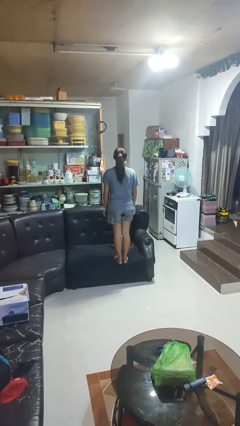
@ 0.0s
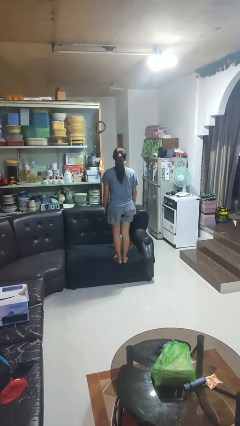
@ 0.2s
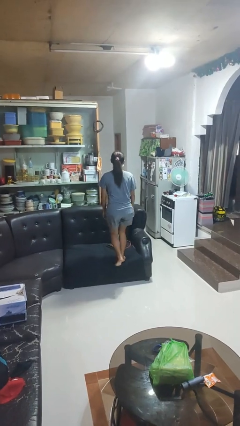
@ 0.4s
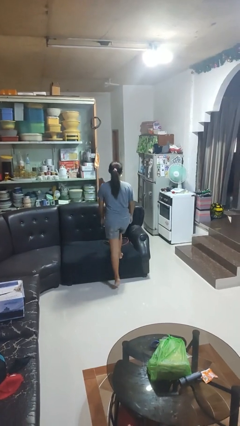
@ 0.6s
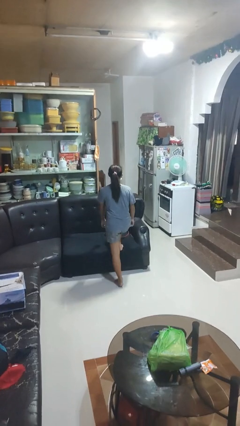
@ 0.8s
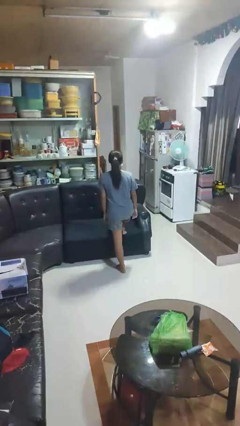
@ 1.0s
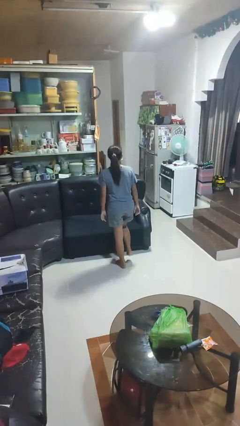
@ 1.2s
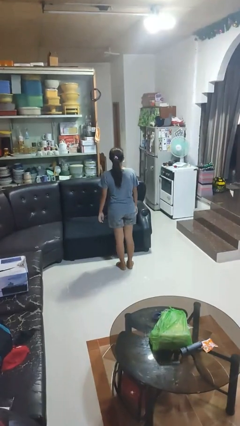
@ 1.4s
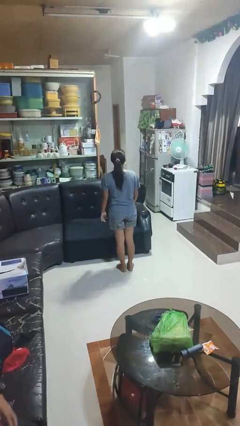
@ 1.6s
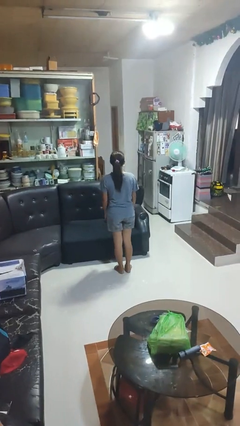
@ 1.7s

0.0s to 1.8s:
person climbs off couch

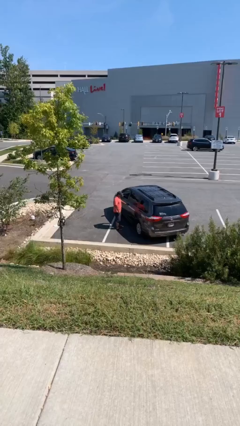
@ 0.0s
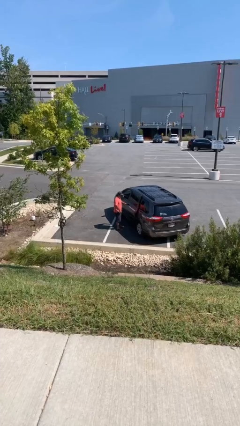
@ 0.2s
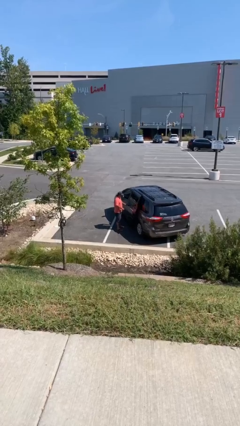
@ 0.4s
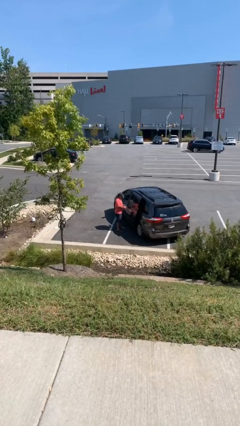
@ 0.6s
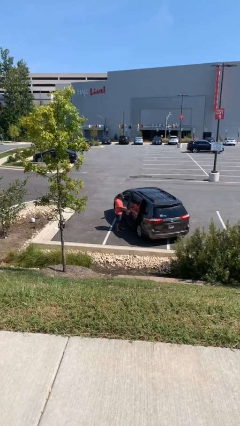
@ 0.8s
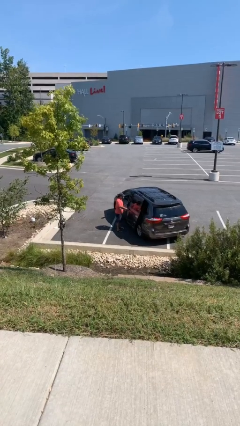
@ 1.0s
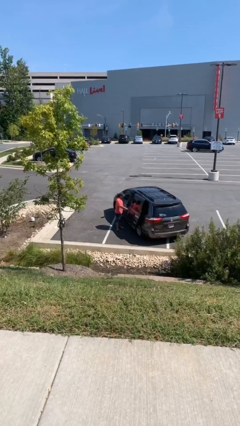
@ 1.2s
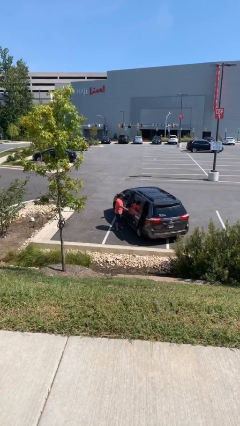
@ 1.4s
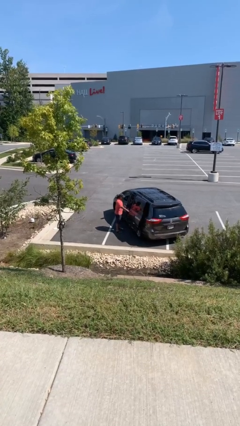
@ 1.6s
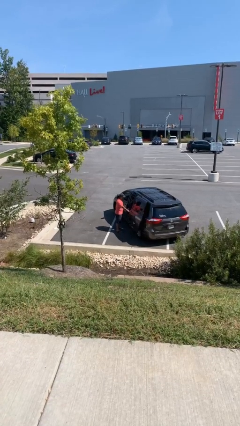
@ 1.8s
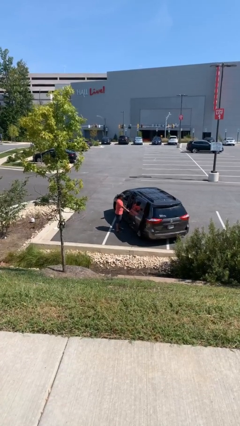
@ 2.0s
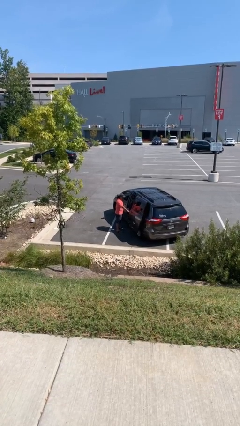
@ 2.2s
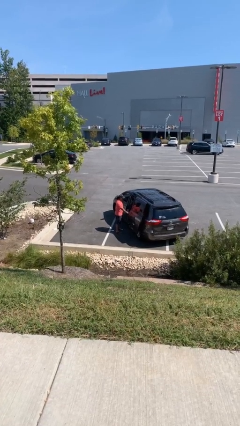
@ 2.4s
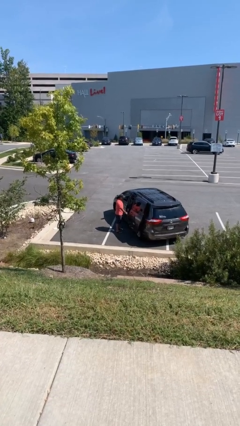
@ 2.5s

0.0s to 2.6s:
person opens car door

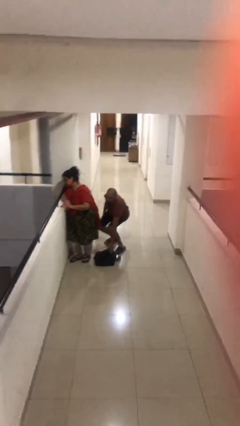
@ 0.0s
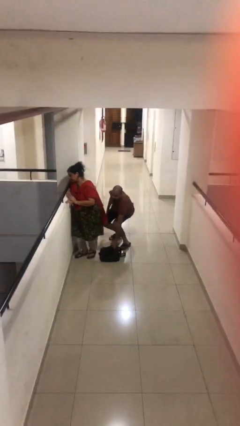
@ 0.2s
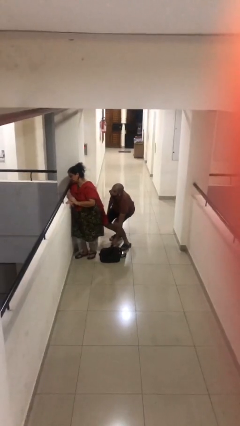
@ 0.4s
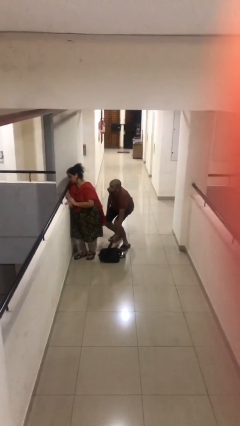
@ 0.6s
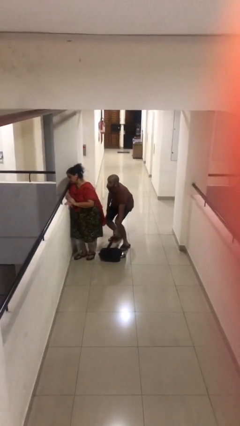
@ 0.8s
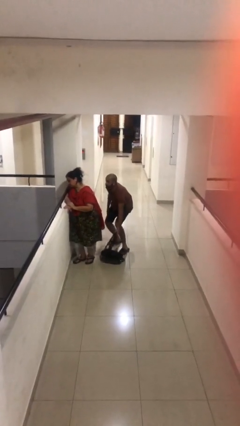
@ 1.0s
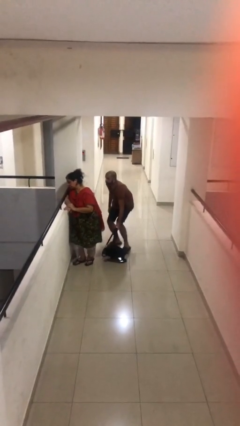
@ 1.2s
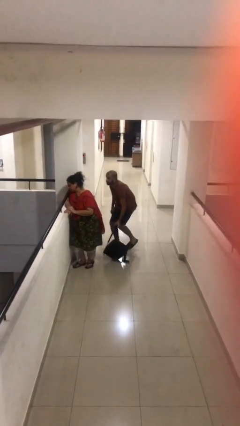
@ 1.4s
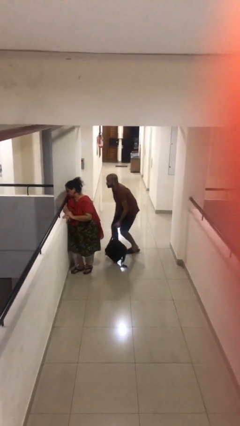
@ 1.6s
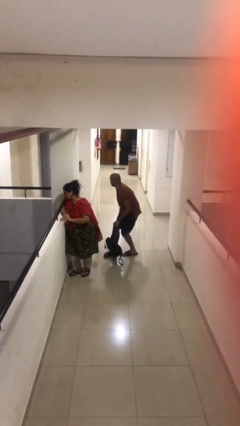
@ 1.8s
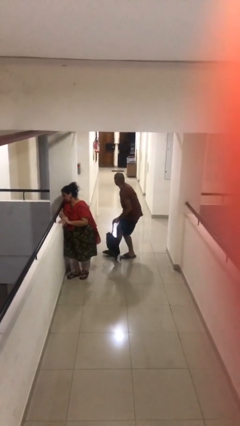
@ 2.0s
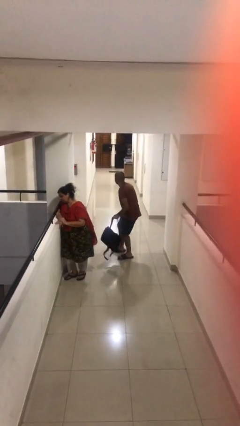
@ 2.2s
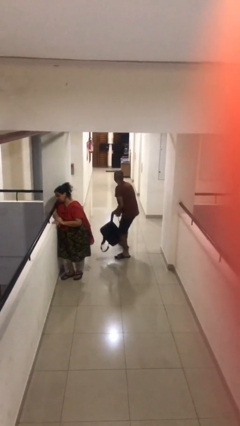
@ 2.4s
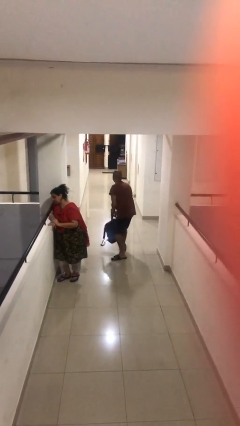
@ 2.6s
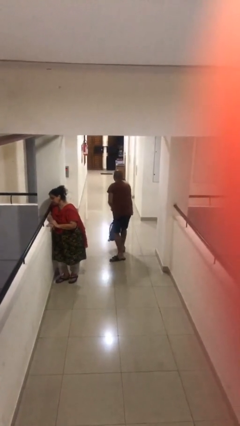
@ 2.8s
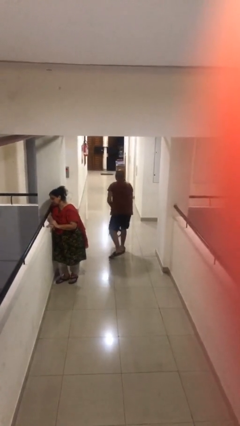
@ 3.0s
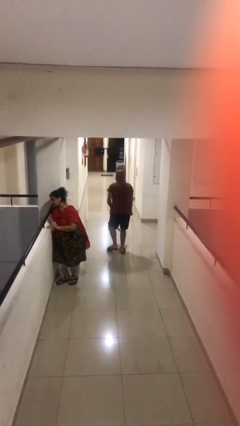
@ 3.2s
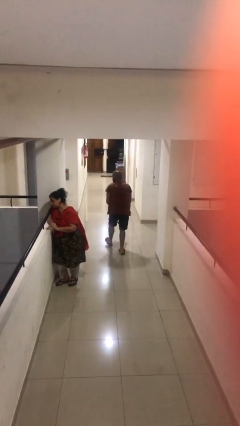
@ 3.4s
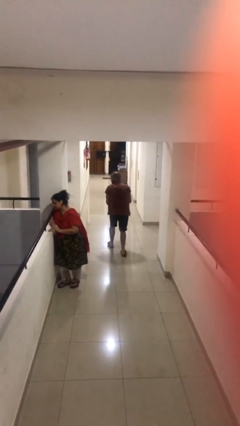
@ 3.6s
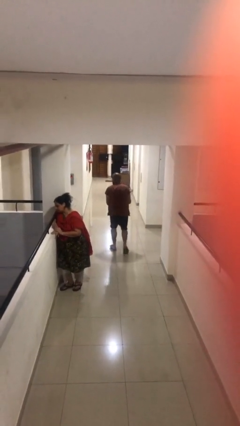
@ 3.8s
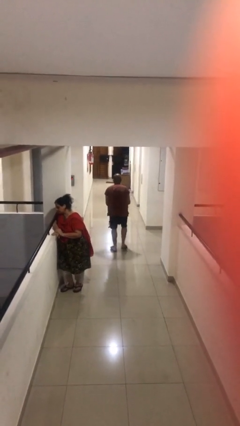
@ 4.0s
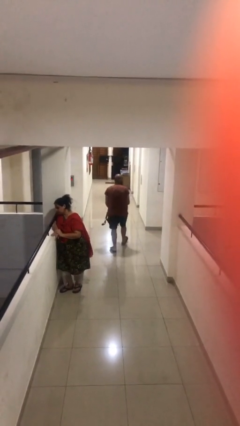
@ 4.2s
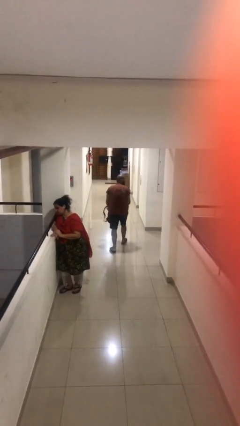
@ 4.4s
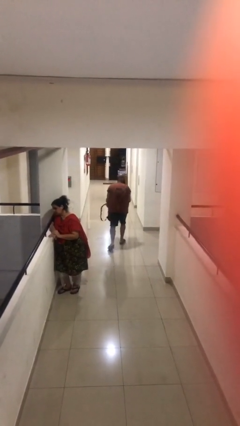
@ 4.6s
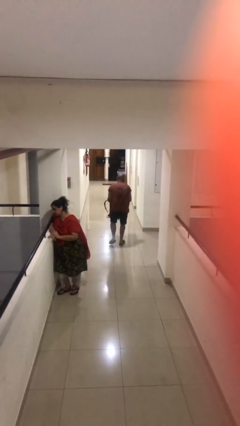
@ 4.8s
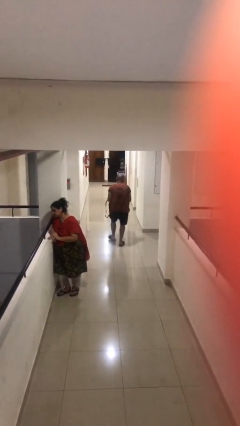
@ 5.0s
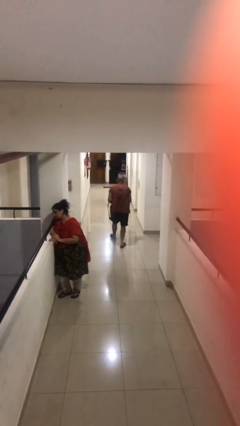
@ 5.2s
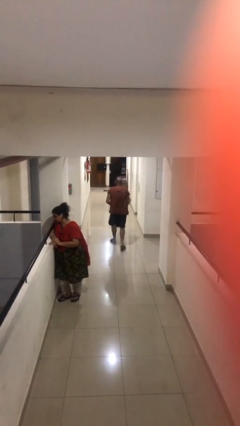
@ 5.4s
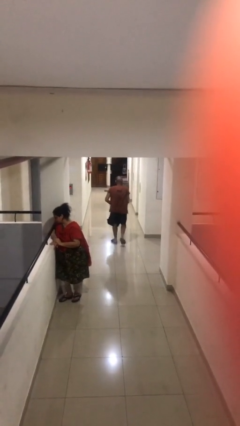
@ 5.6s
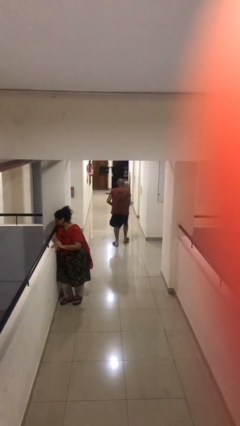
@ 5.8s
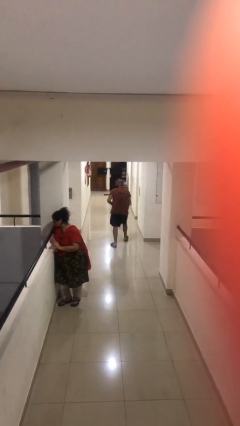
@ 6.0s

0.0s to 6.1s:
person steals object from person

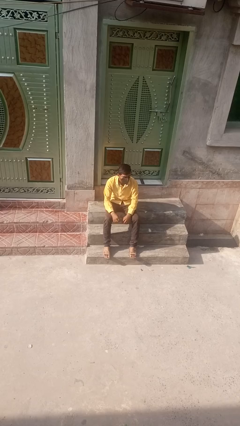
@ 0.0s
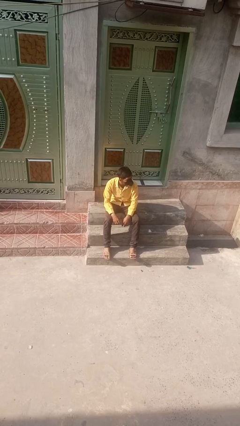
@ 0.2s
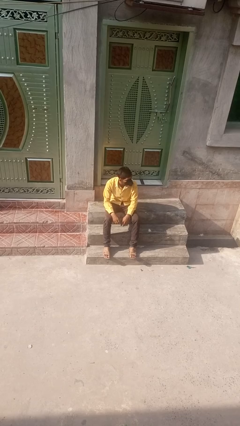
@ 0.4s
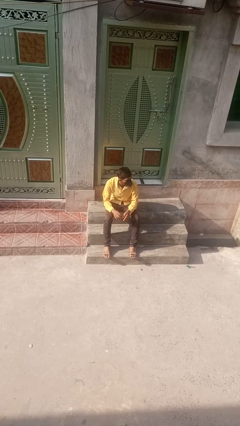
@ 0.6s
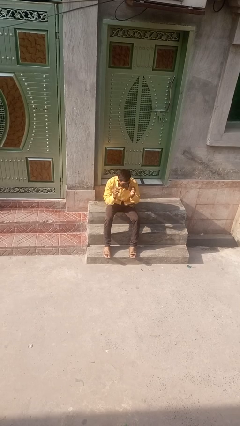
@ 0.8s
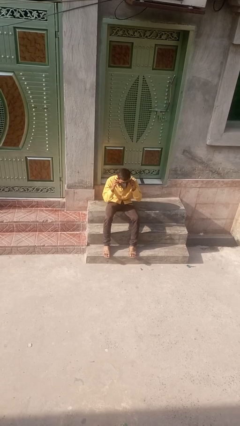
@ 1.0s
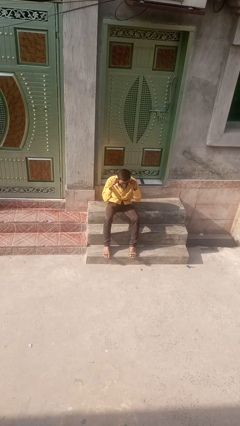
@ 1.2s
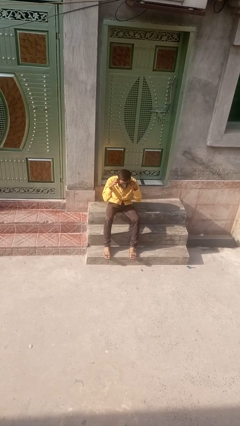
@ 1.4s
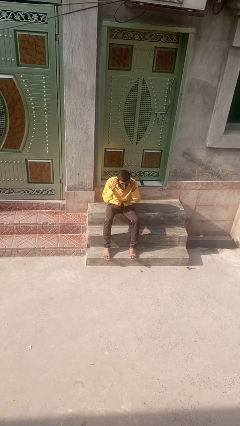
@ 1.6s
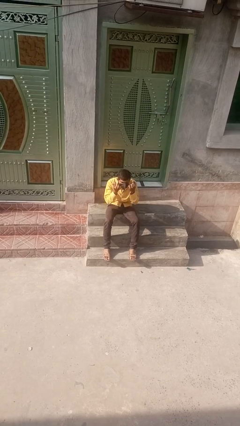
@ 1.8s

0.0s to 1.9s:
person takes off facemask

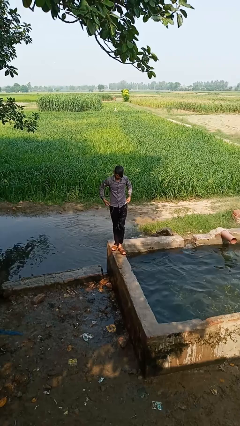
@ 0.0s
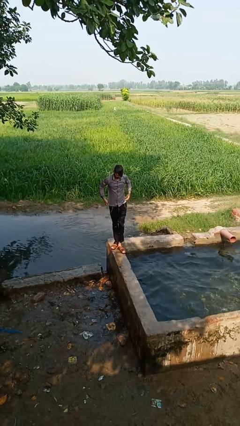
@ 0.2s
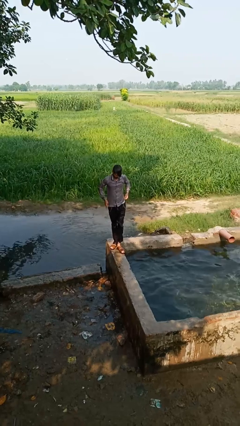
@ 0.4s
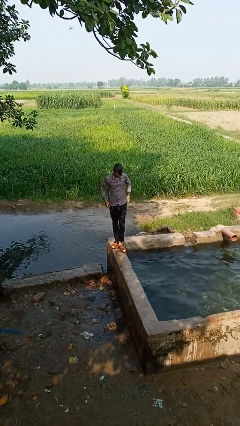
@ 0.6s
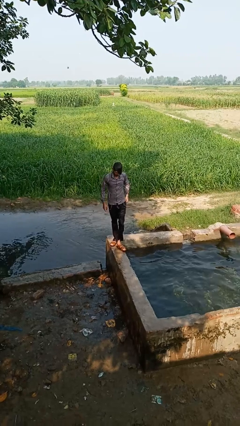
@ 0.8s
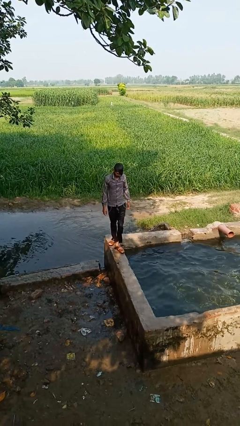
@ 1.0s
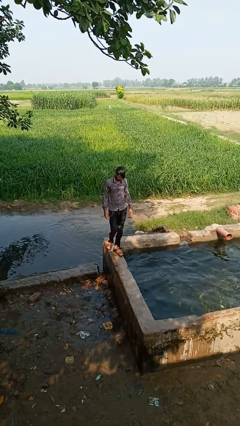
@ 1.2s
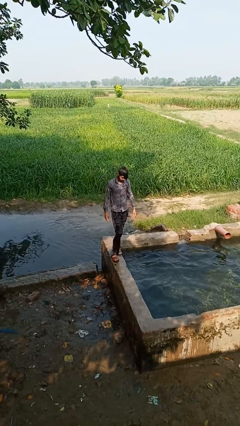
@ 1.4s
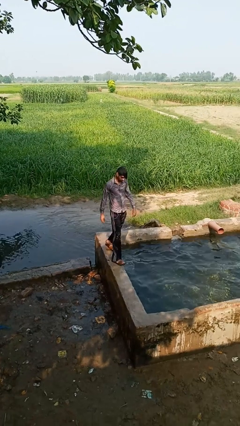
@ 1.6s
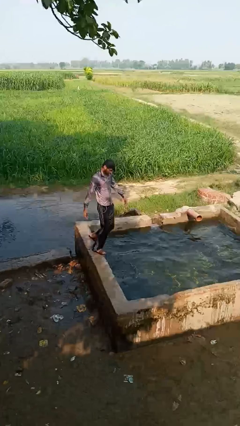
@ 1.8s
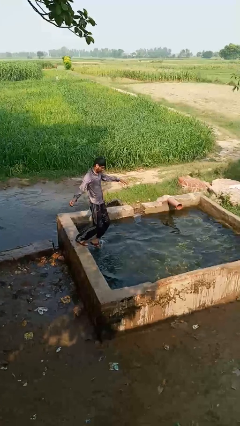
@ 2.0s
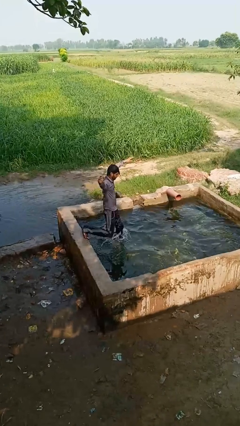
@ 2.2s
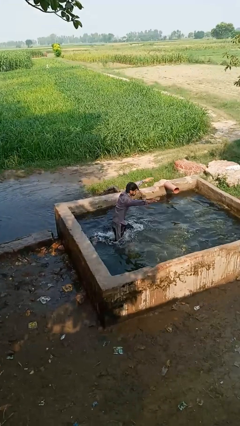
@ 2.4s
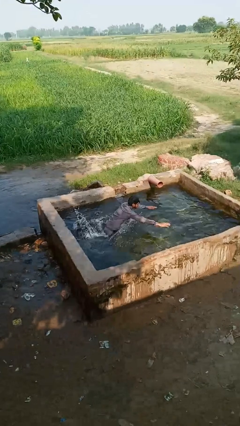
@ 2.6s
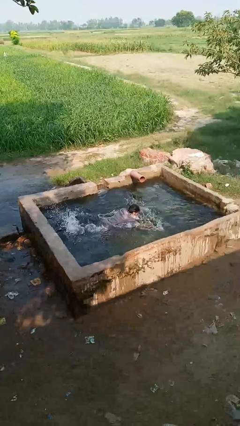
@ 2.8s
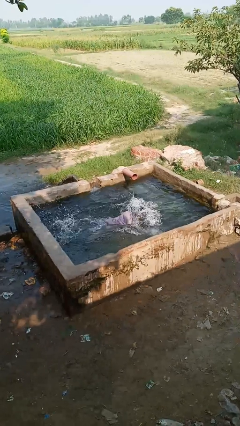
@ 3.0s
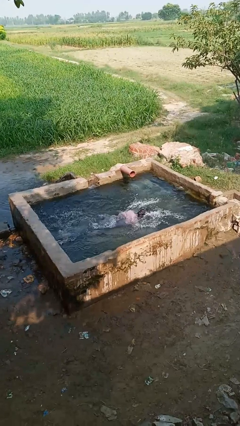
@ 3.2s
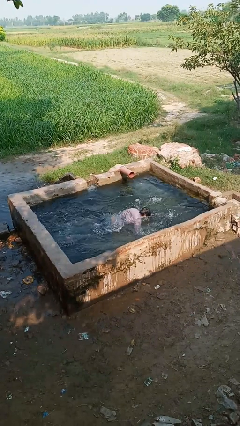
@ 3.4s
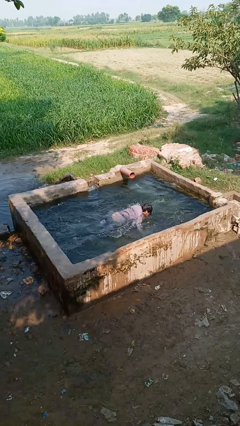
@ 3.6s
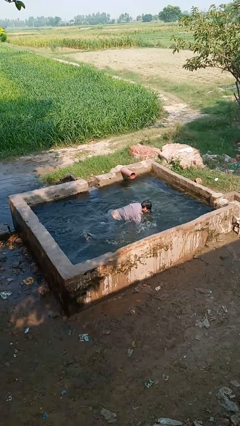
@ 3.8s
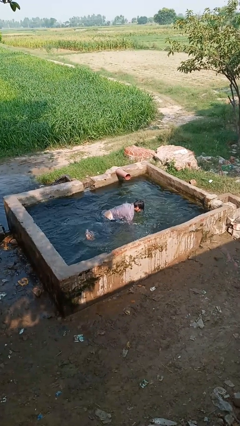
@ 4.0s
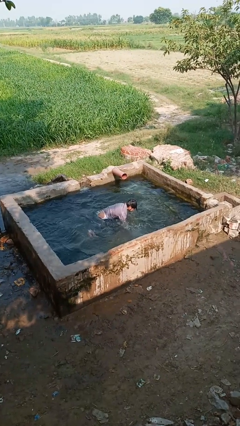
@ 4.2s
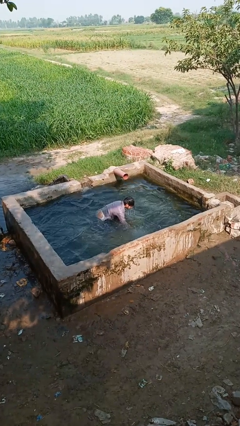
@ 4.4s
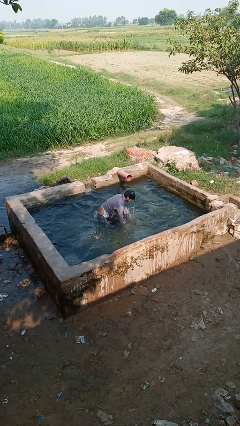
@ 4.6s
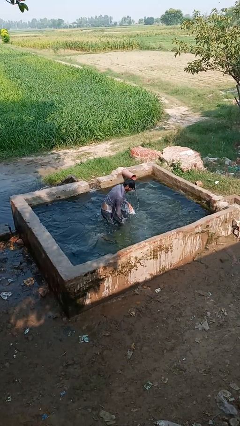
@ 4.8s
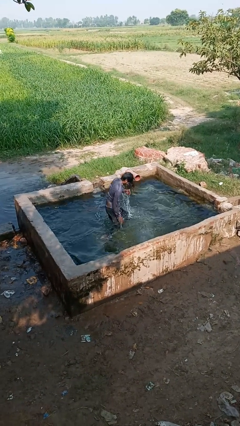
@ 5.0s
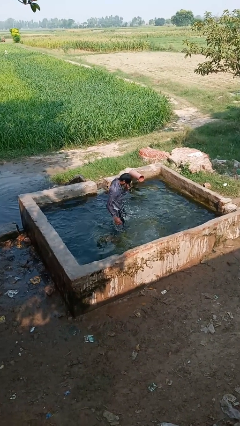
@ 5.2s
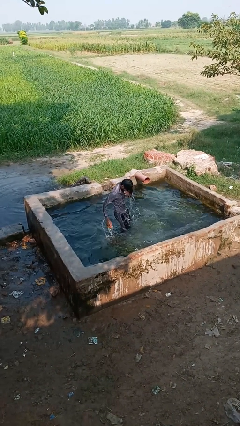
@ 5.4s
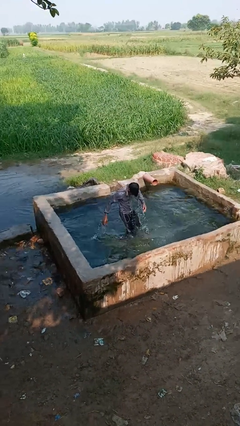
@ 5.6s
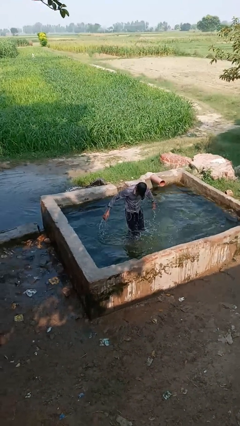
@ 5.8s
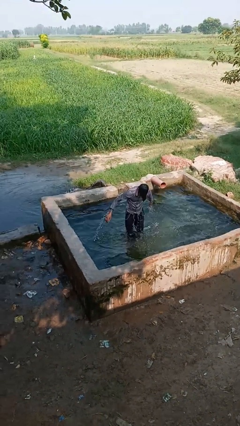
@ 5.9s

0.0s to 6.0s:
person falls into pool
